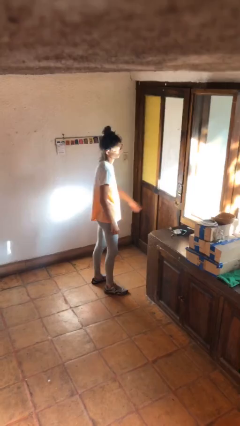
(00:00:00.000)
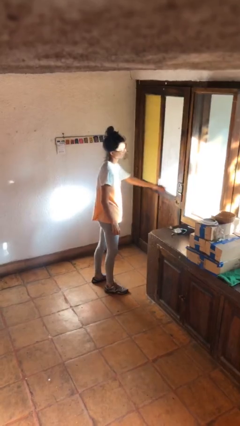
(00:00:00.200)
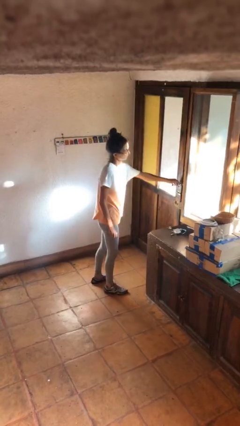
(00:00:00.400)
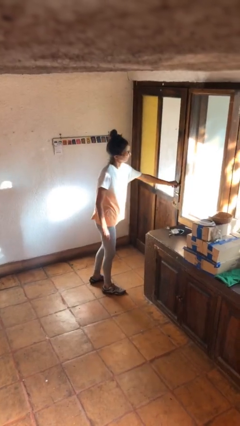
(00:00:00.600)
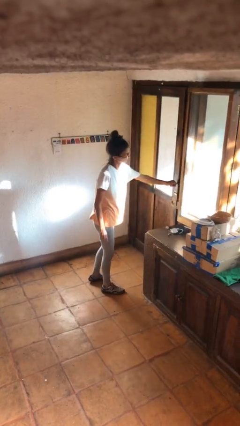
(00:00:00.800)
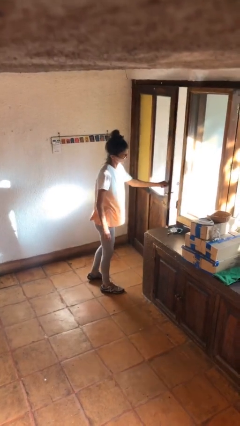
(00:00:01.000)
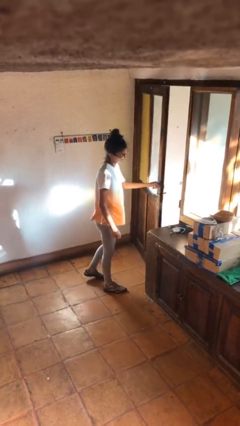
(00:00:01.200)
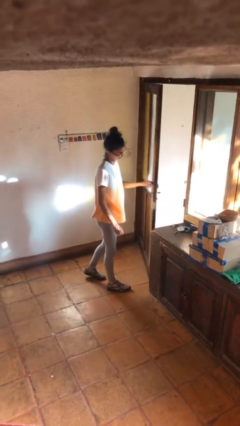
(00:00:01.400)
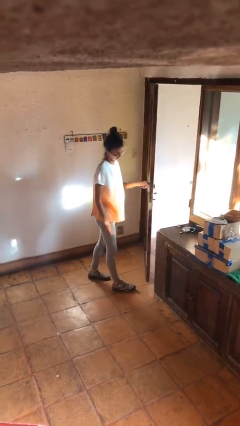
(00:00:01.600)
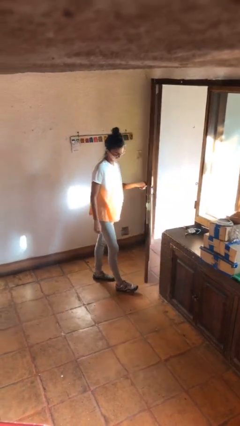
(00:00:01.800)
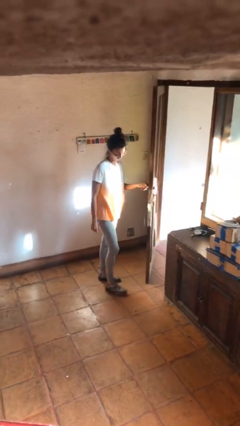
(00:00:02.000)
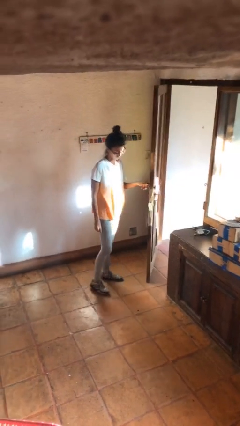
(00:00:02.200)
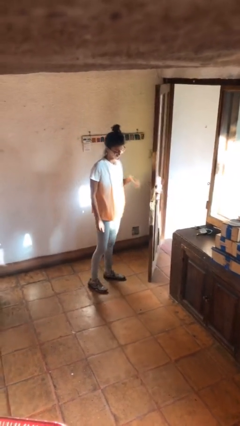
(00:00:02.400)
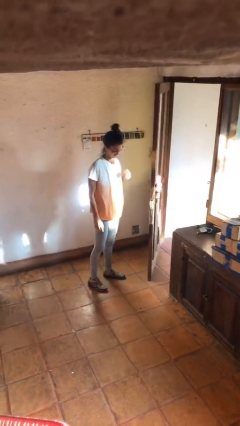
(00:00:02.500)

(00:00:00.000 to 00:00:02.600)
person opens facility door

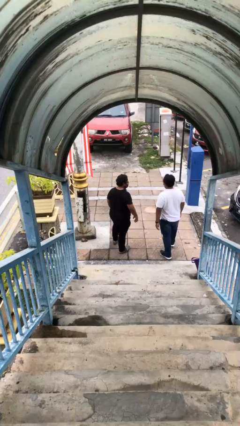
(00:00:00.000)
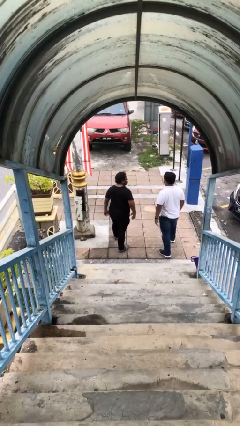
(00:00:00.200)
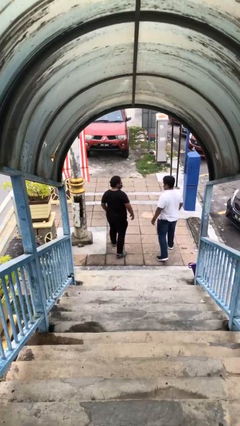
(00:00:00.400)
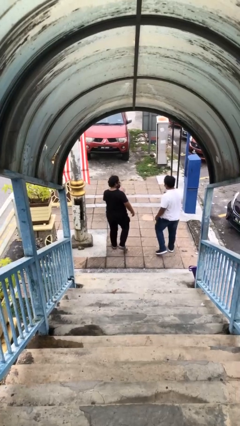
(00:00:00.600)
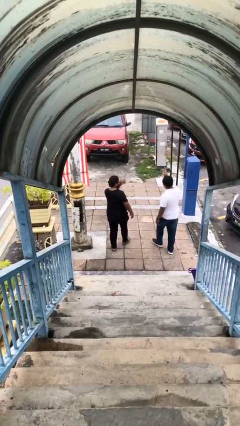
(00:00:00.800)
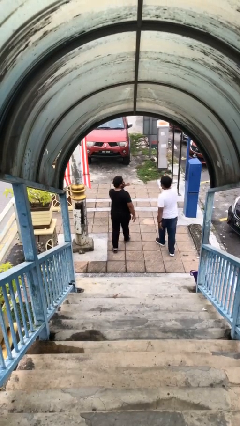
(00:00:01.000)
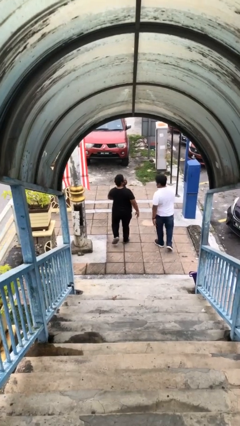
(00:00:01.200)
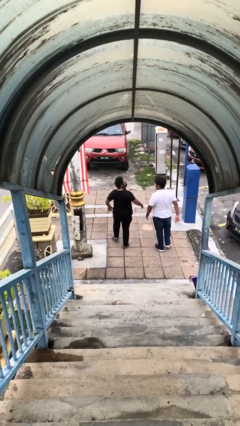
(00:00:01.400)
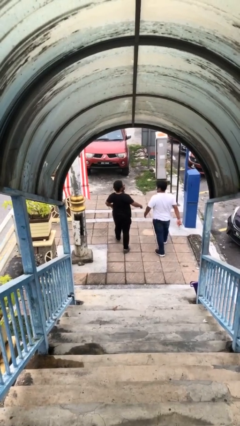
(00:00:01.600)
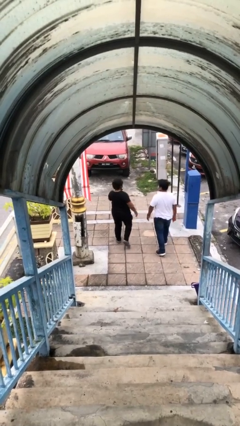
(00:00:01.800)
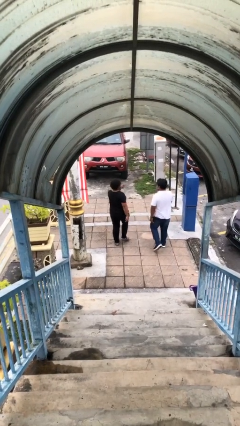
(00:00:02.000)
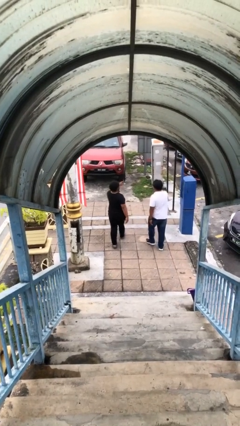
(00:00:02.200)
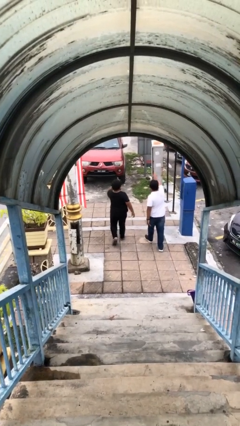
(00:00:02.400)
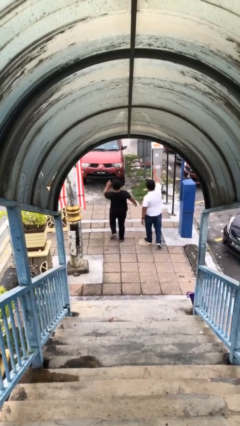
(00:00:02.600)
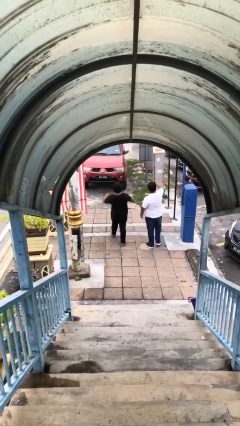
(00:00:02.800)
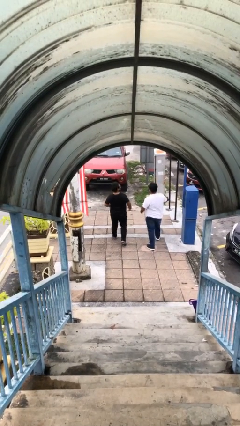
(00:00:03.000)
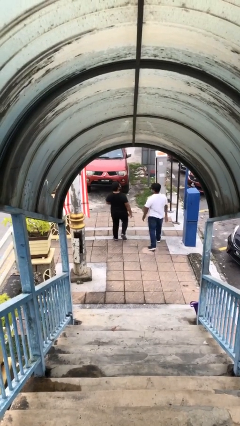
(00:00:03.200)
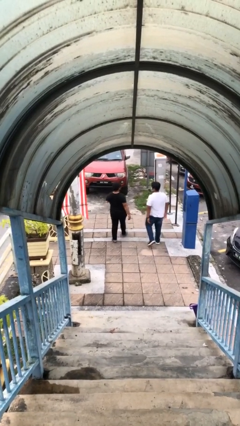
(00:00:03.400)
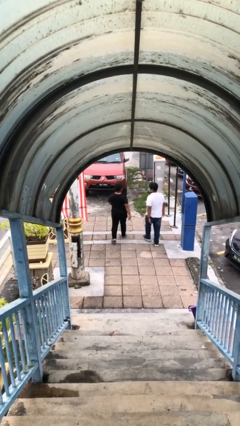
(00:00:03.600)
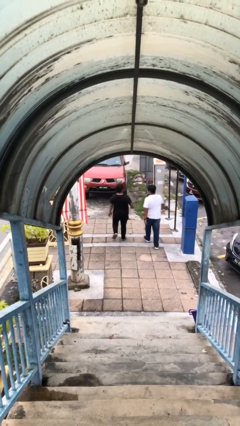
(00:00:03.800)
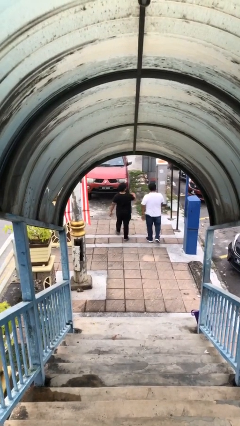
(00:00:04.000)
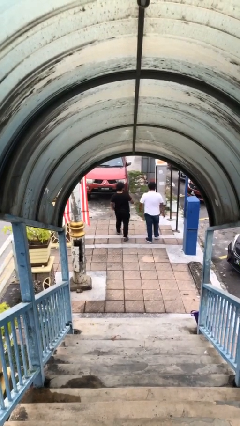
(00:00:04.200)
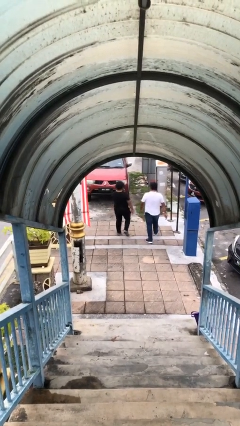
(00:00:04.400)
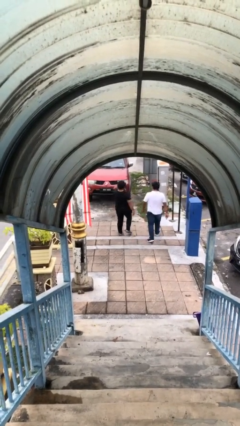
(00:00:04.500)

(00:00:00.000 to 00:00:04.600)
person talks to person

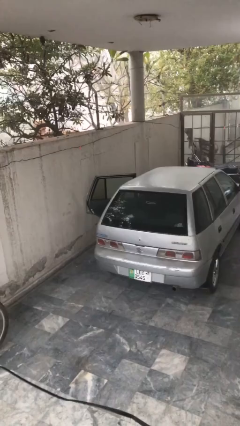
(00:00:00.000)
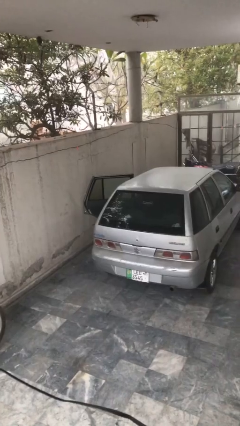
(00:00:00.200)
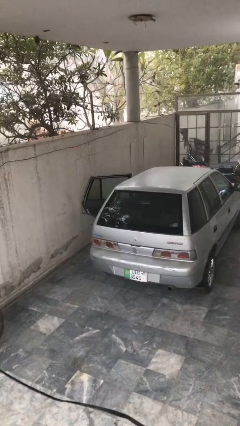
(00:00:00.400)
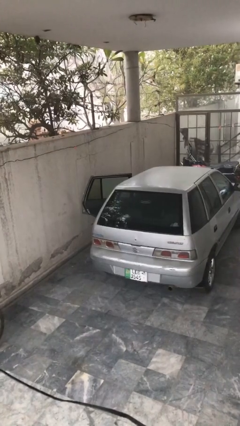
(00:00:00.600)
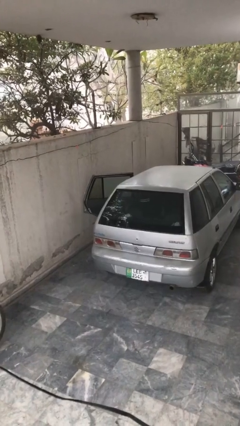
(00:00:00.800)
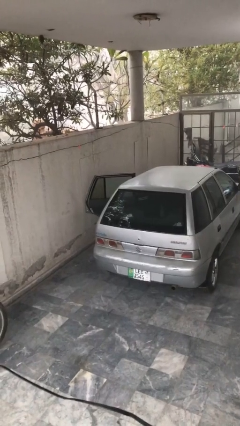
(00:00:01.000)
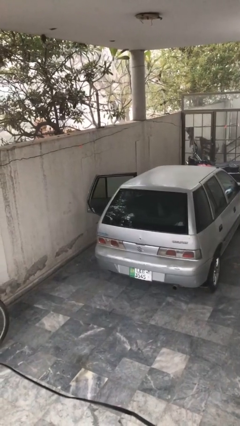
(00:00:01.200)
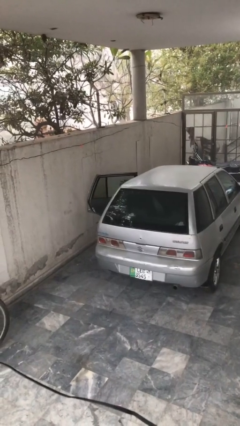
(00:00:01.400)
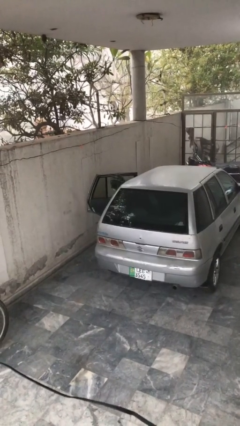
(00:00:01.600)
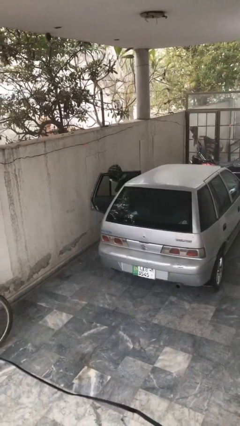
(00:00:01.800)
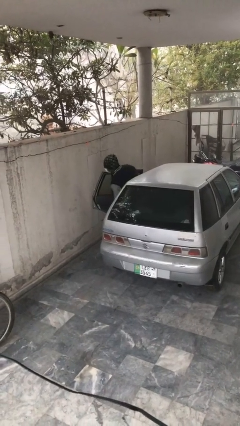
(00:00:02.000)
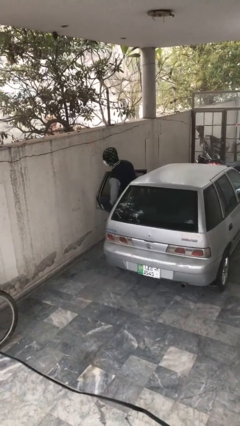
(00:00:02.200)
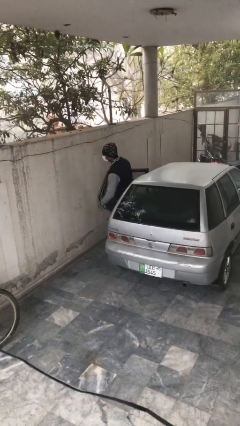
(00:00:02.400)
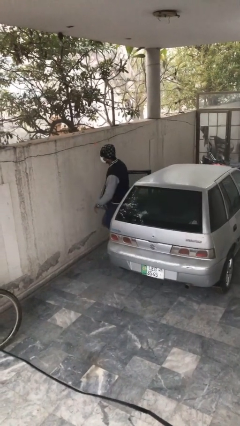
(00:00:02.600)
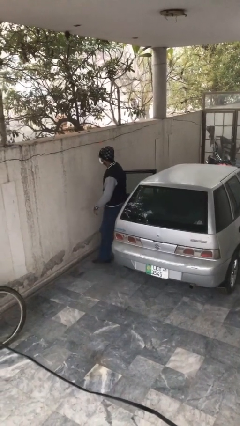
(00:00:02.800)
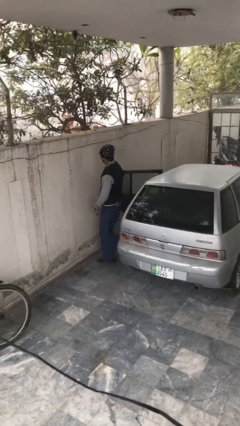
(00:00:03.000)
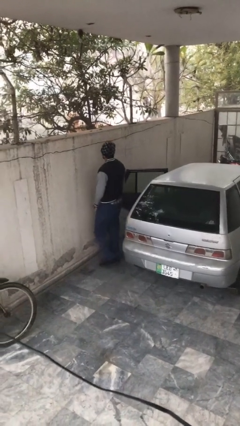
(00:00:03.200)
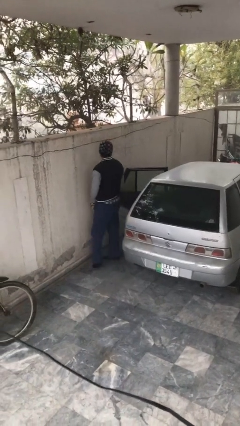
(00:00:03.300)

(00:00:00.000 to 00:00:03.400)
person exits car

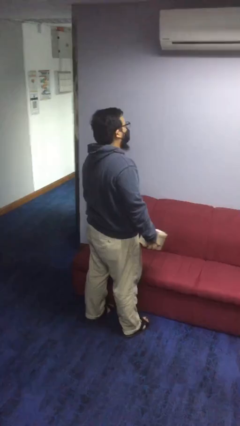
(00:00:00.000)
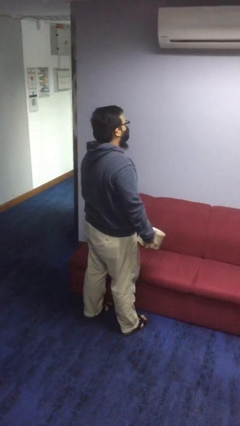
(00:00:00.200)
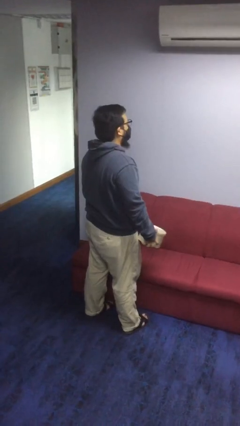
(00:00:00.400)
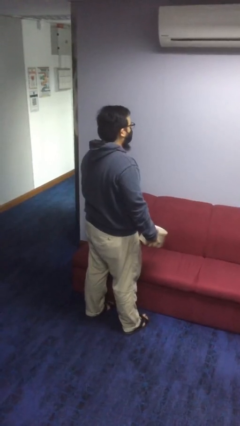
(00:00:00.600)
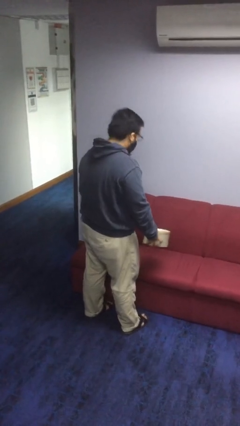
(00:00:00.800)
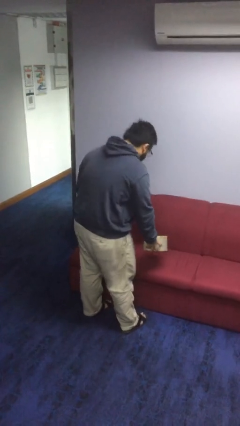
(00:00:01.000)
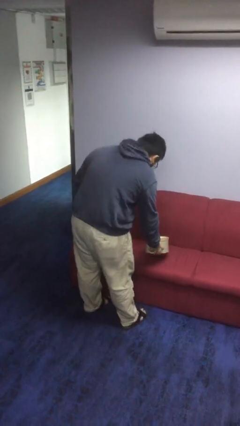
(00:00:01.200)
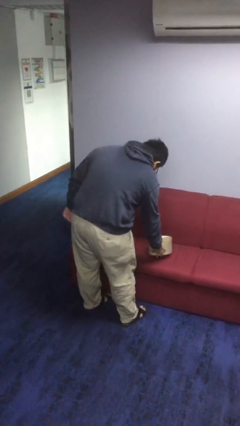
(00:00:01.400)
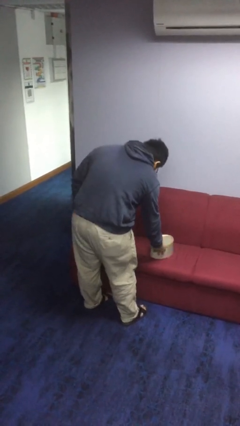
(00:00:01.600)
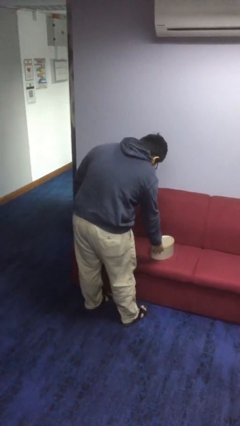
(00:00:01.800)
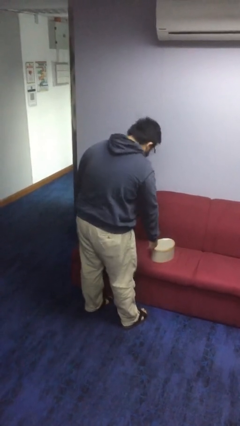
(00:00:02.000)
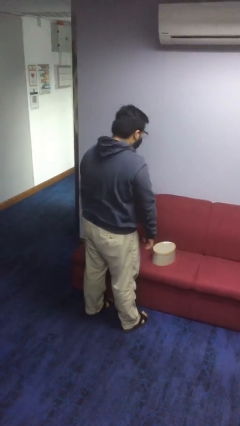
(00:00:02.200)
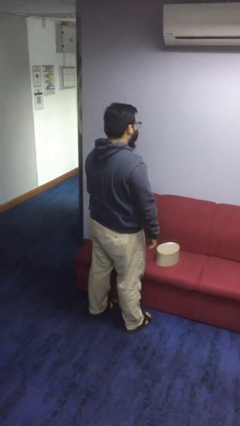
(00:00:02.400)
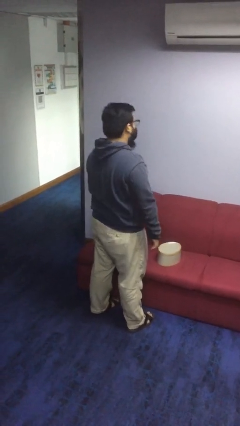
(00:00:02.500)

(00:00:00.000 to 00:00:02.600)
person puts down object on couch

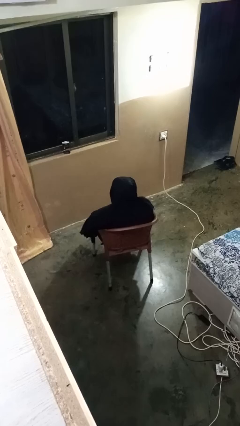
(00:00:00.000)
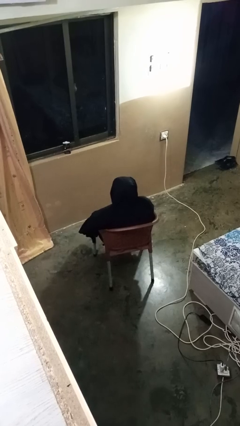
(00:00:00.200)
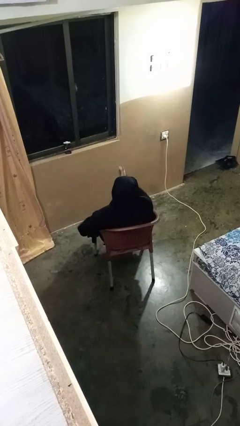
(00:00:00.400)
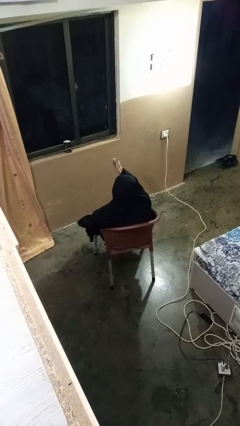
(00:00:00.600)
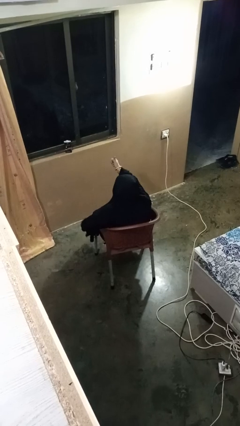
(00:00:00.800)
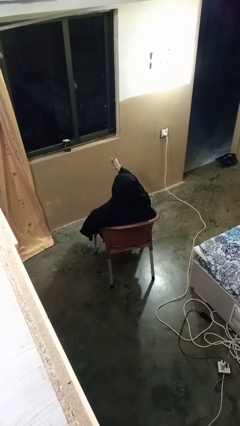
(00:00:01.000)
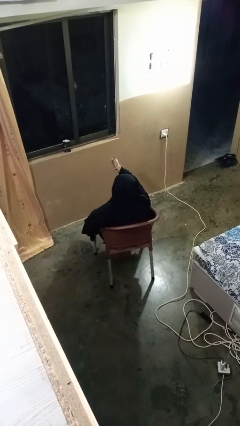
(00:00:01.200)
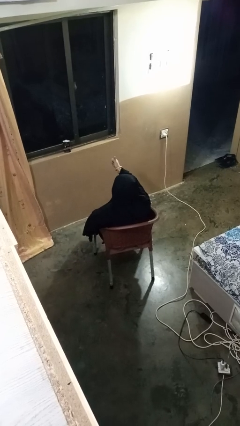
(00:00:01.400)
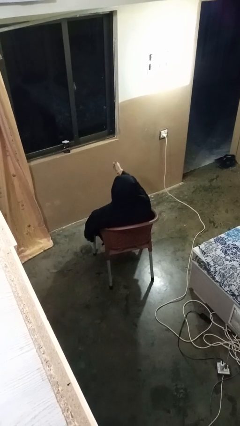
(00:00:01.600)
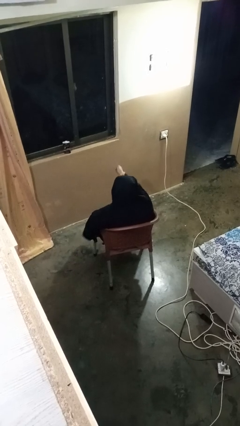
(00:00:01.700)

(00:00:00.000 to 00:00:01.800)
person gestures thumbs up

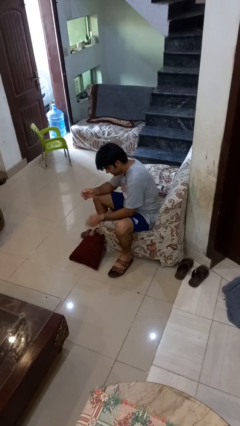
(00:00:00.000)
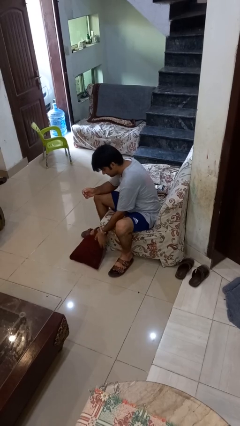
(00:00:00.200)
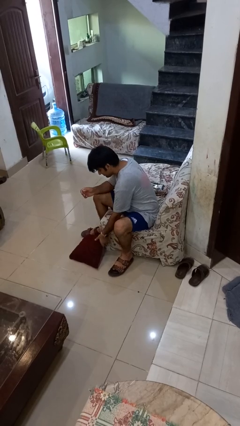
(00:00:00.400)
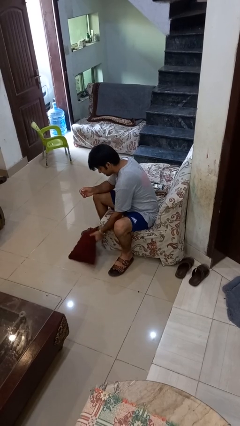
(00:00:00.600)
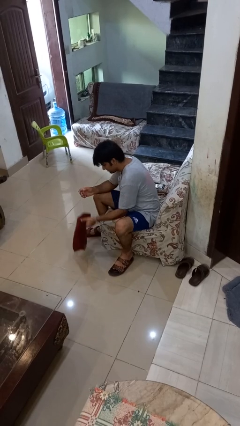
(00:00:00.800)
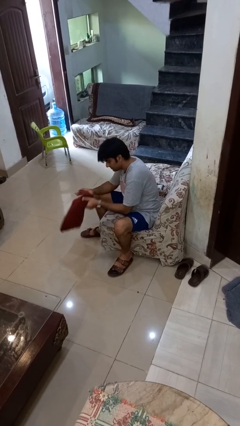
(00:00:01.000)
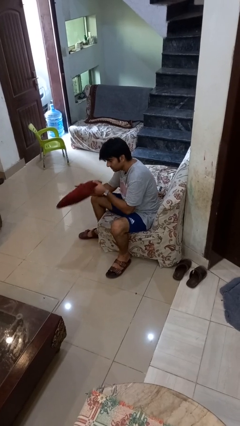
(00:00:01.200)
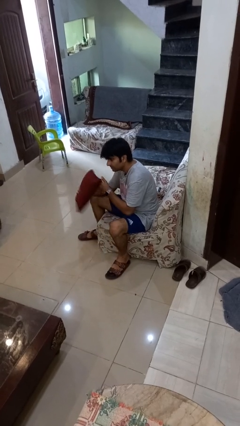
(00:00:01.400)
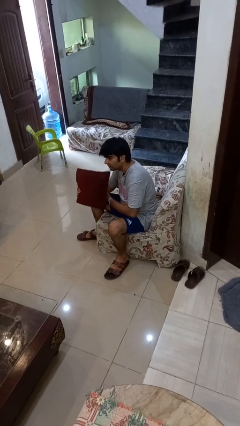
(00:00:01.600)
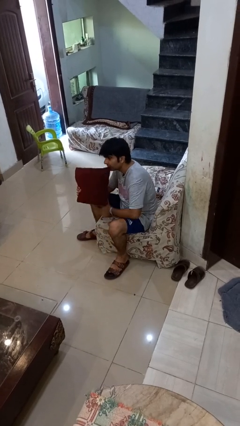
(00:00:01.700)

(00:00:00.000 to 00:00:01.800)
person picks up object from floor
